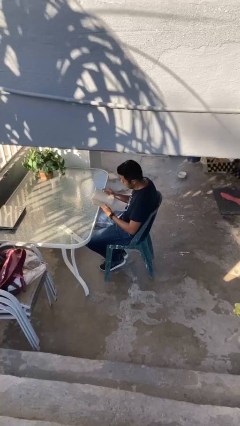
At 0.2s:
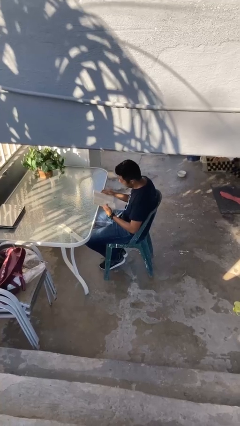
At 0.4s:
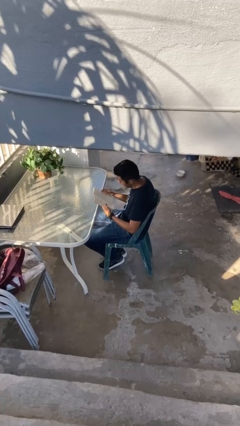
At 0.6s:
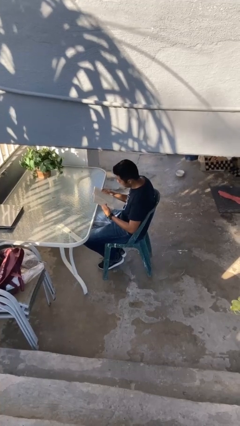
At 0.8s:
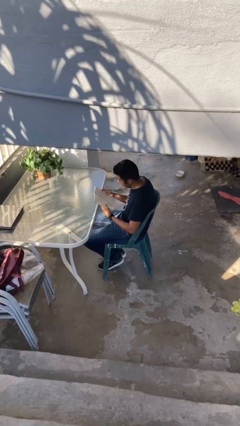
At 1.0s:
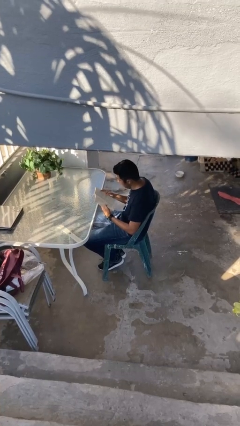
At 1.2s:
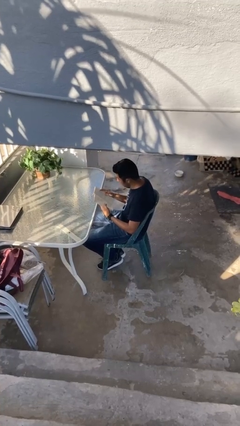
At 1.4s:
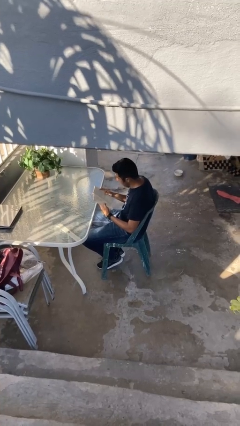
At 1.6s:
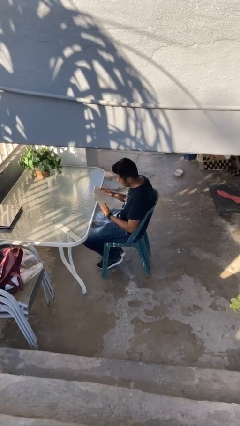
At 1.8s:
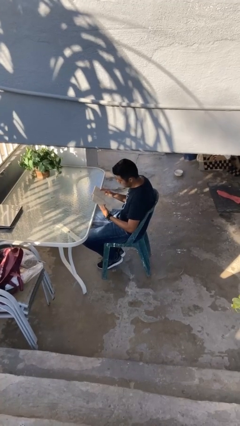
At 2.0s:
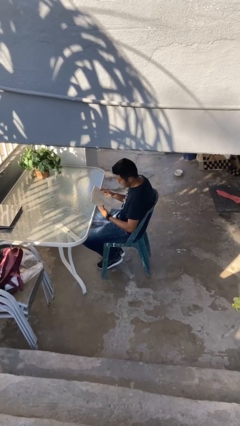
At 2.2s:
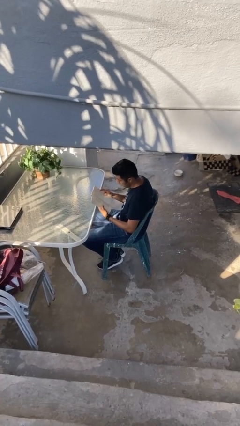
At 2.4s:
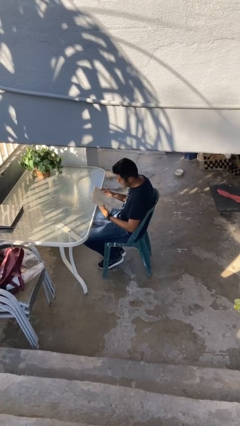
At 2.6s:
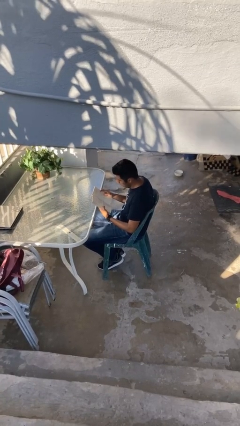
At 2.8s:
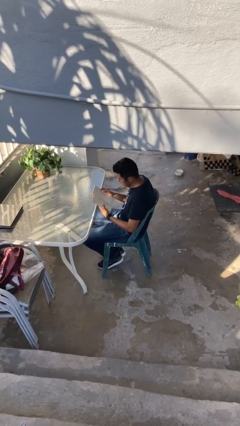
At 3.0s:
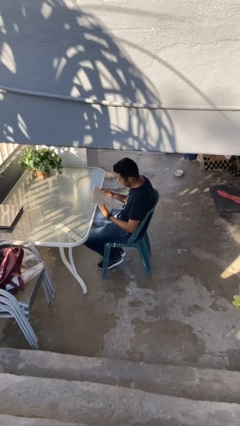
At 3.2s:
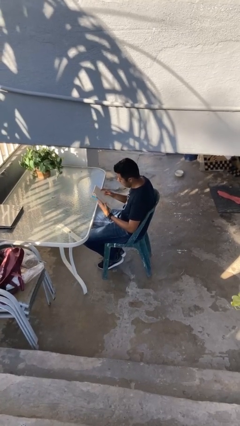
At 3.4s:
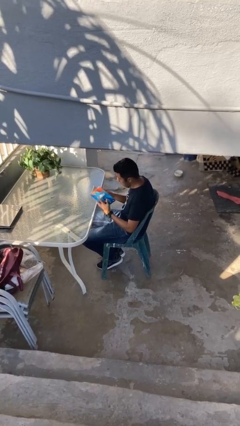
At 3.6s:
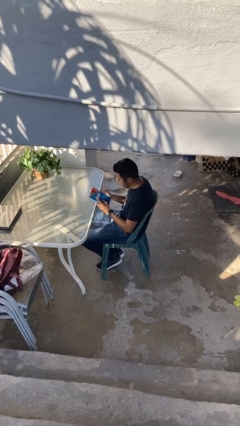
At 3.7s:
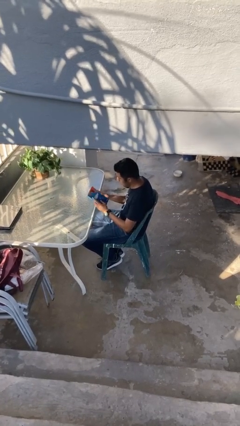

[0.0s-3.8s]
person reads document

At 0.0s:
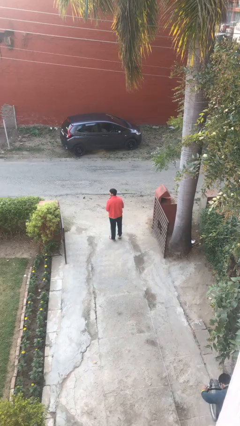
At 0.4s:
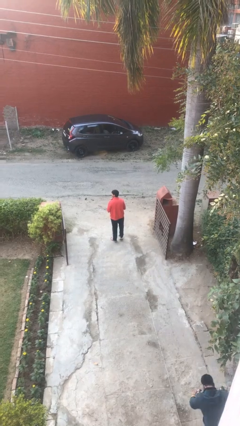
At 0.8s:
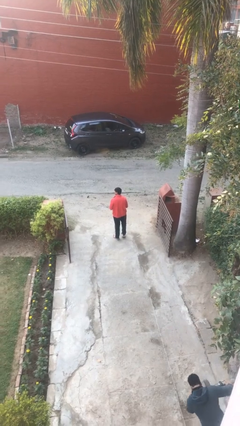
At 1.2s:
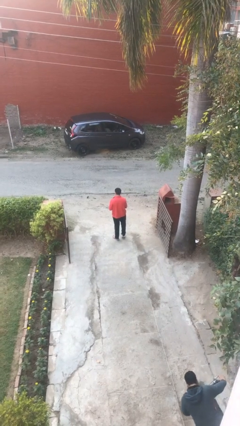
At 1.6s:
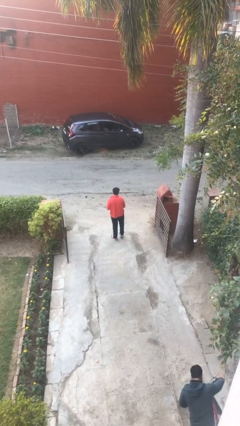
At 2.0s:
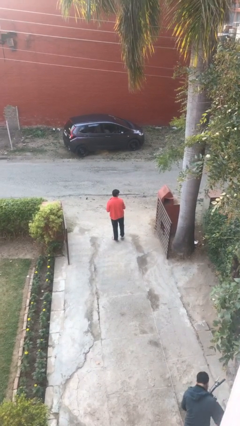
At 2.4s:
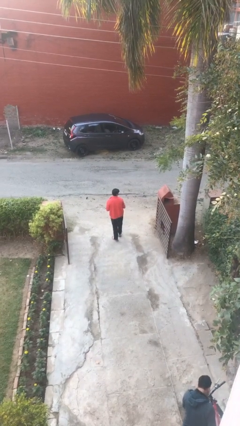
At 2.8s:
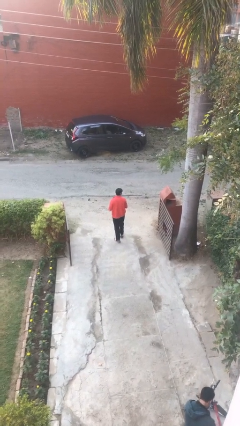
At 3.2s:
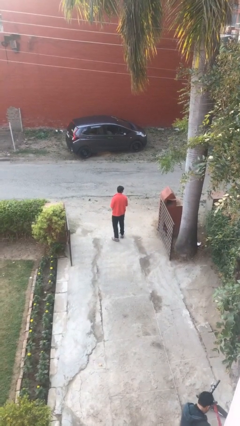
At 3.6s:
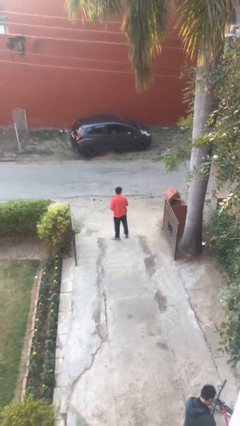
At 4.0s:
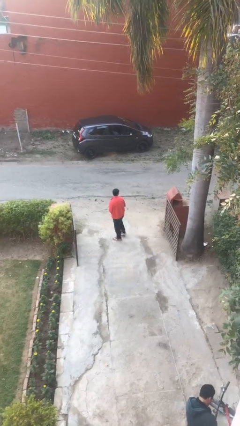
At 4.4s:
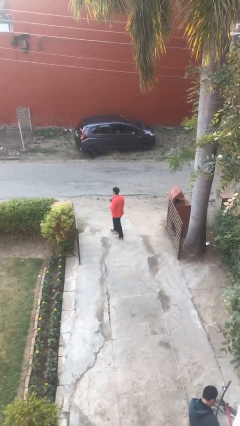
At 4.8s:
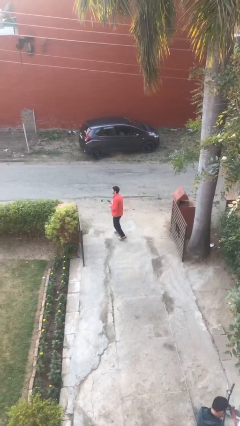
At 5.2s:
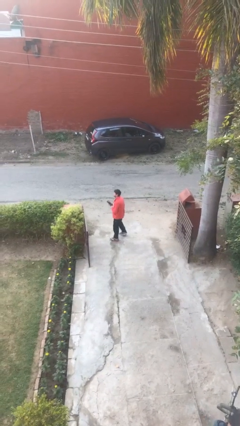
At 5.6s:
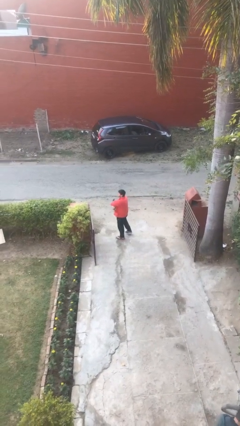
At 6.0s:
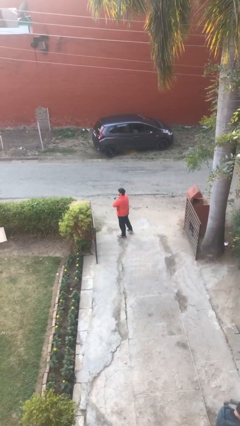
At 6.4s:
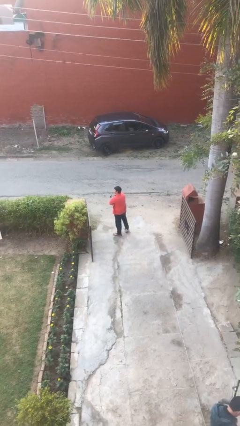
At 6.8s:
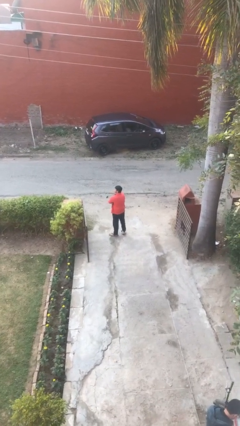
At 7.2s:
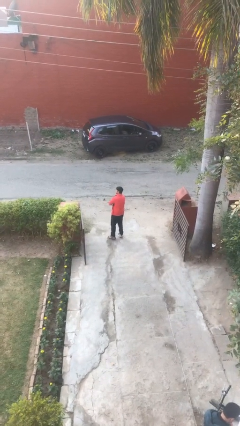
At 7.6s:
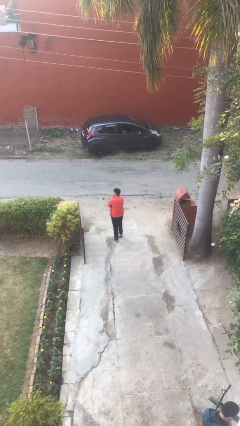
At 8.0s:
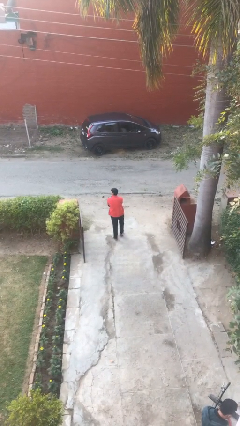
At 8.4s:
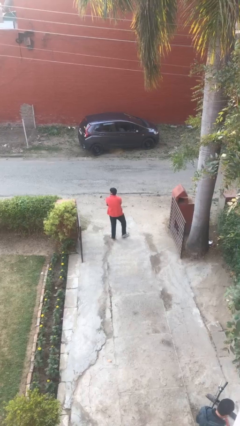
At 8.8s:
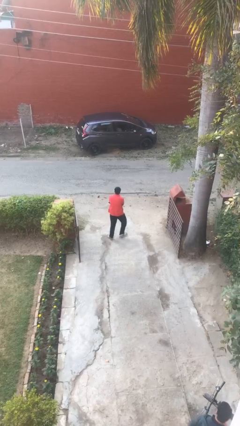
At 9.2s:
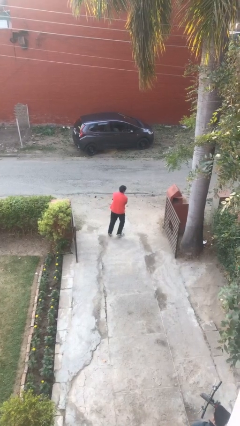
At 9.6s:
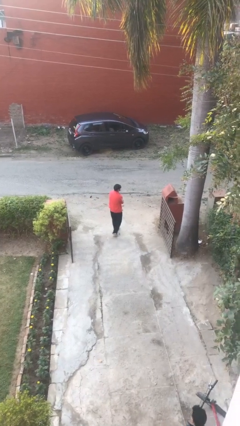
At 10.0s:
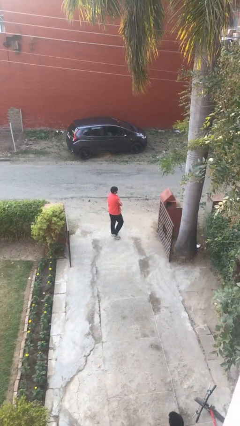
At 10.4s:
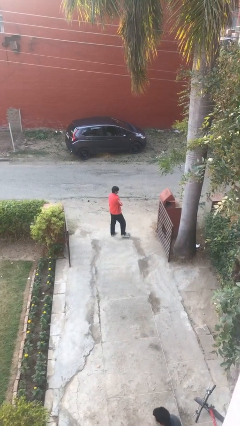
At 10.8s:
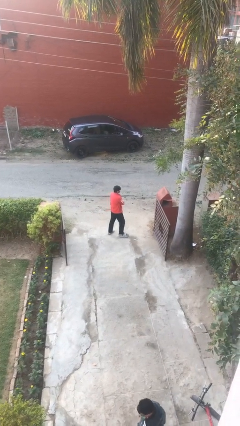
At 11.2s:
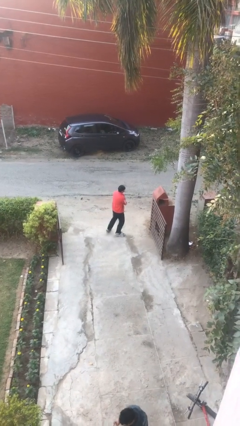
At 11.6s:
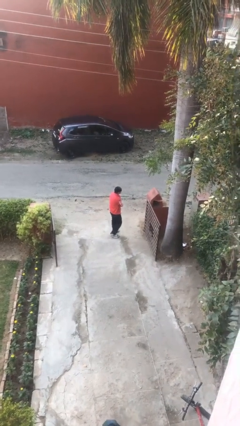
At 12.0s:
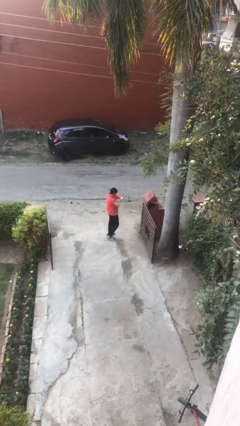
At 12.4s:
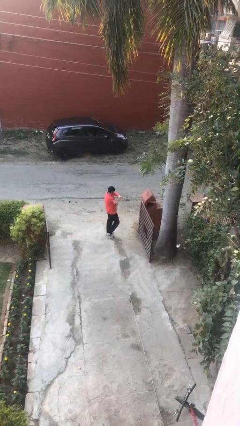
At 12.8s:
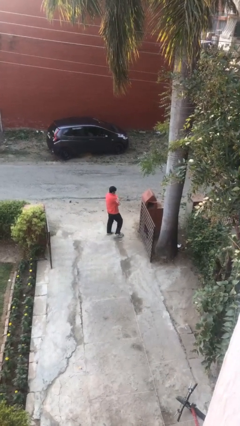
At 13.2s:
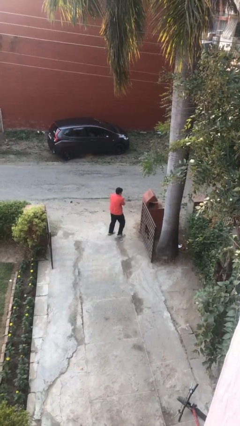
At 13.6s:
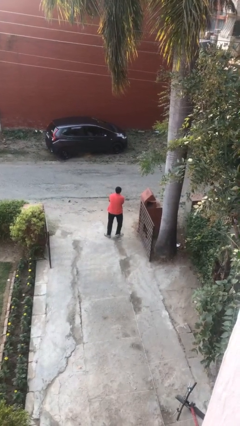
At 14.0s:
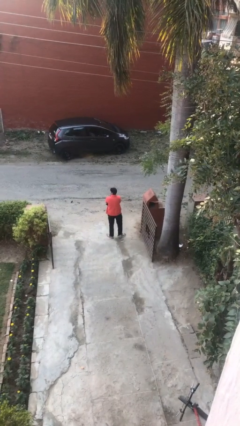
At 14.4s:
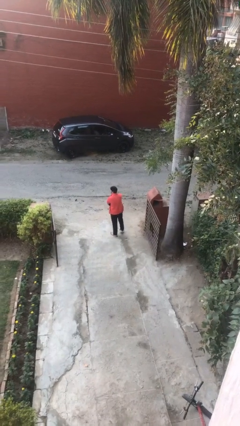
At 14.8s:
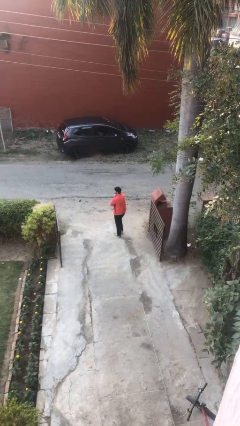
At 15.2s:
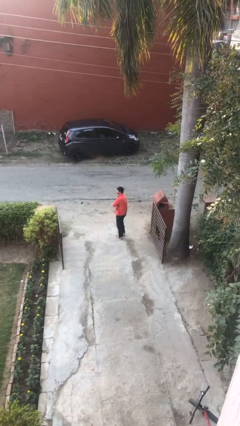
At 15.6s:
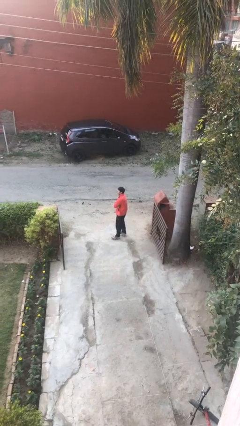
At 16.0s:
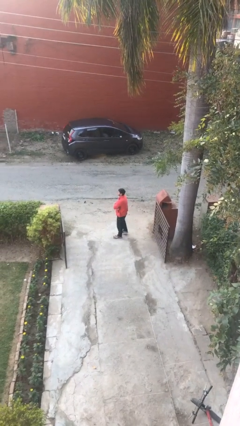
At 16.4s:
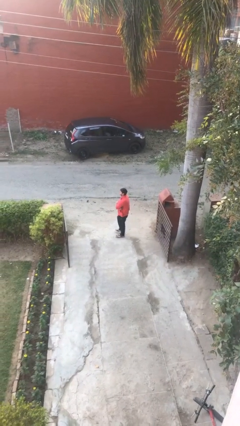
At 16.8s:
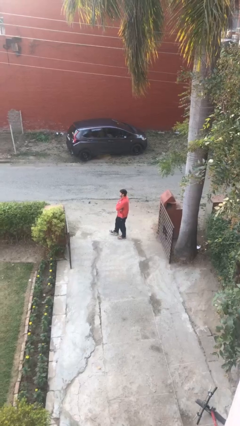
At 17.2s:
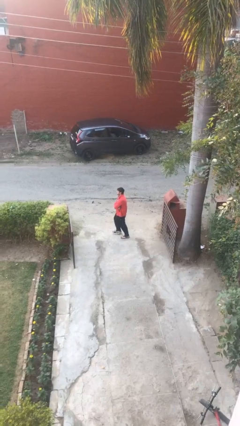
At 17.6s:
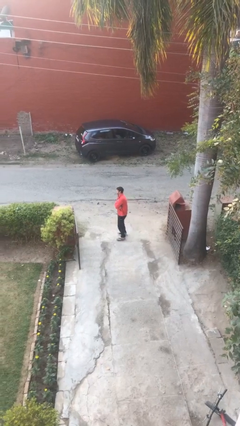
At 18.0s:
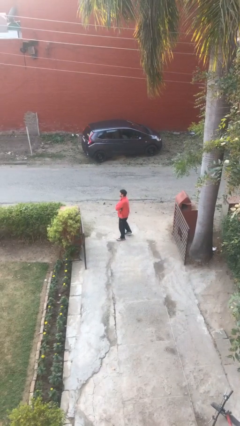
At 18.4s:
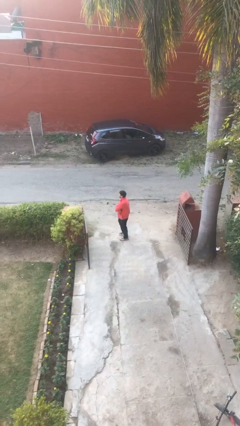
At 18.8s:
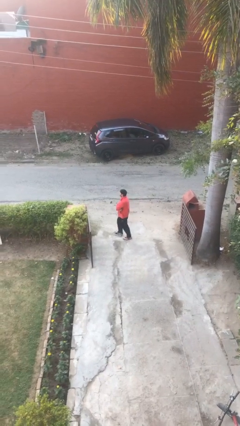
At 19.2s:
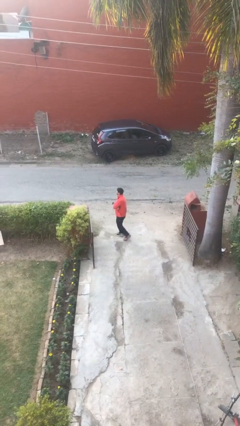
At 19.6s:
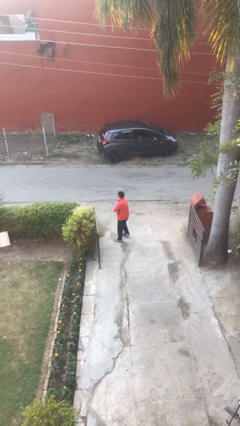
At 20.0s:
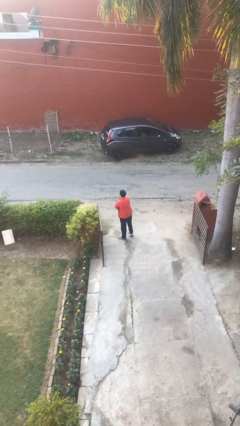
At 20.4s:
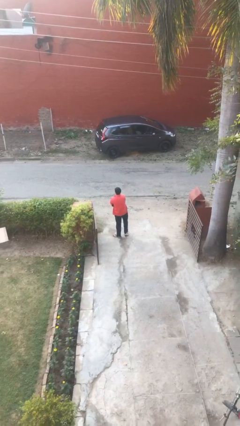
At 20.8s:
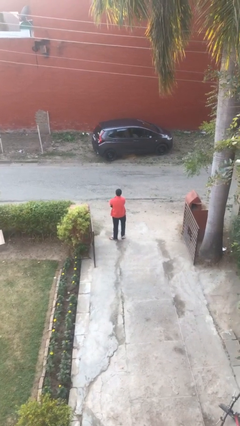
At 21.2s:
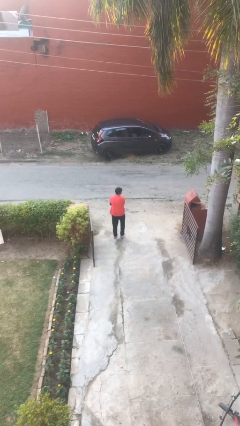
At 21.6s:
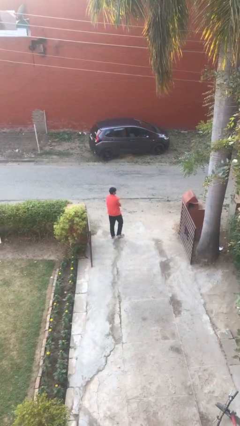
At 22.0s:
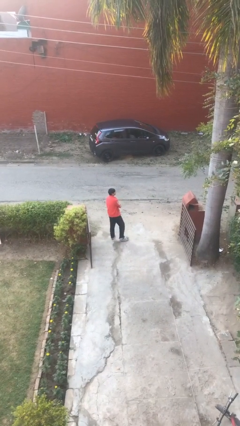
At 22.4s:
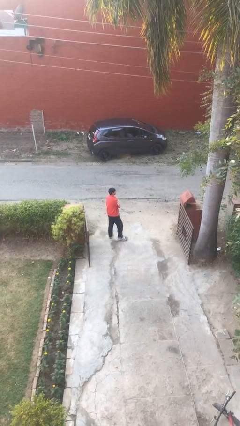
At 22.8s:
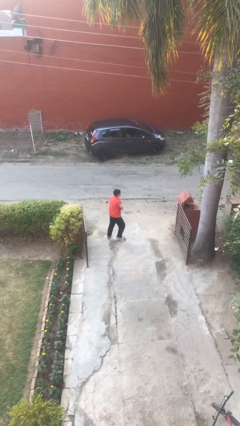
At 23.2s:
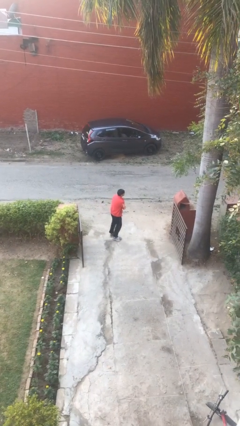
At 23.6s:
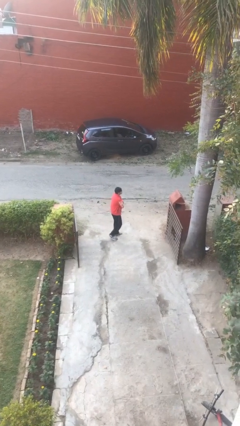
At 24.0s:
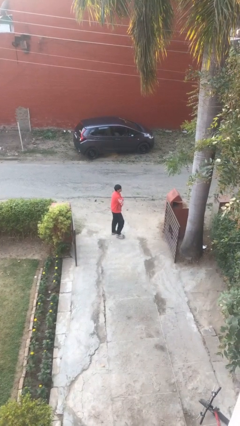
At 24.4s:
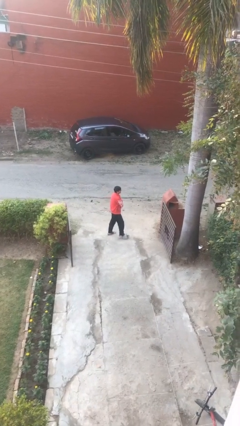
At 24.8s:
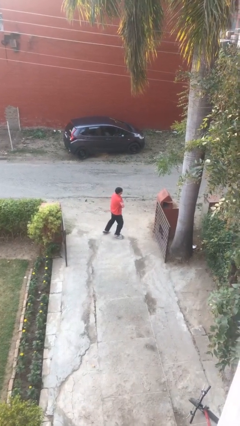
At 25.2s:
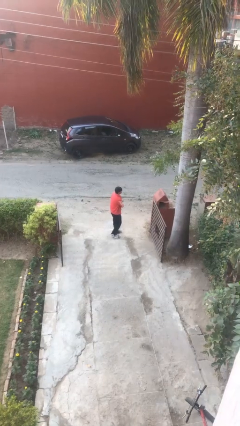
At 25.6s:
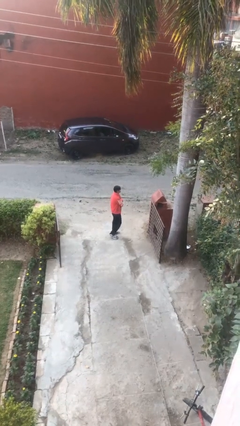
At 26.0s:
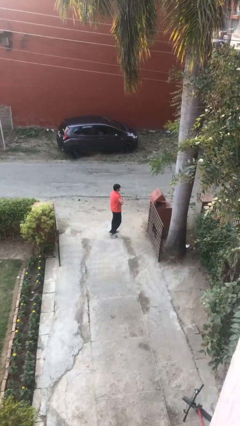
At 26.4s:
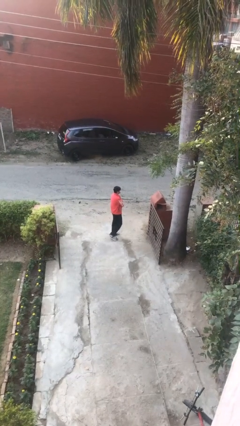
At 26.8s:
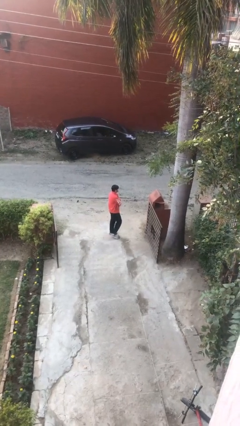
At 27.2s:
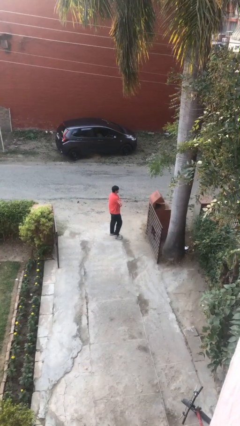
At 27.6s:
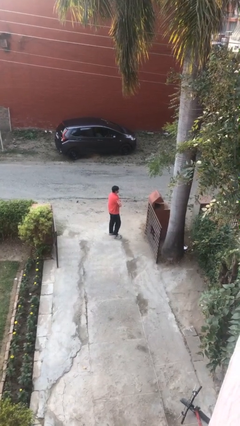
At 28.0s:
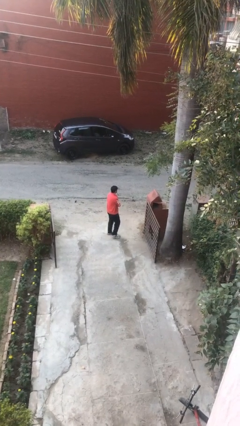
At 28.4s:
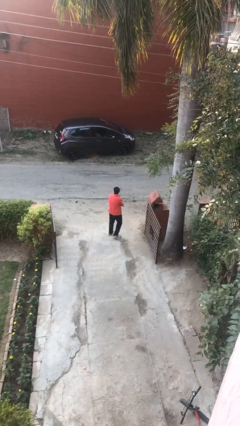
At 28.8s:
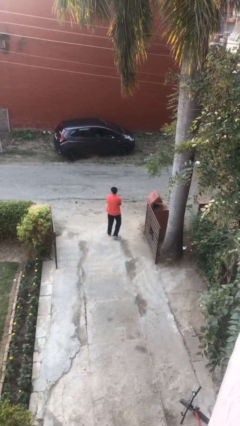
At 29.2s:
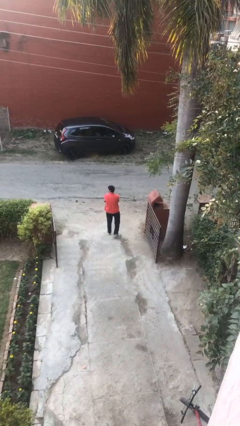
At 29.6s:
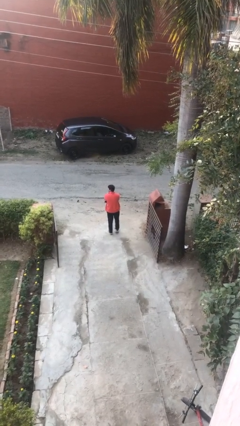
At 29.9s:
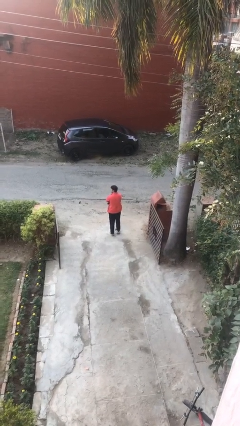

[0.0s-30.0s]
person walks
